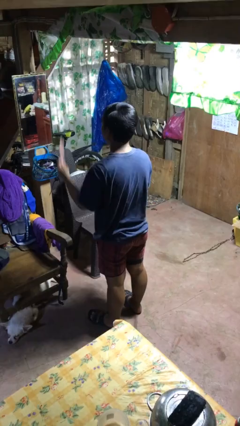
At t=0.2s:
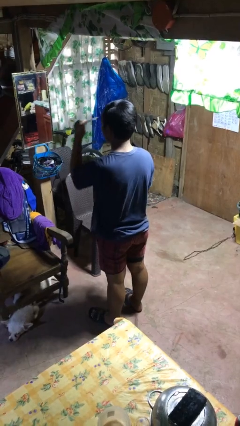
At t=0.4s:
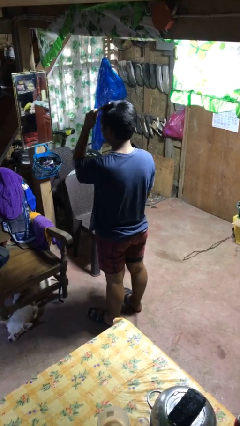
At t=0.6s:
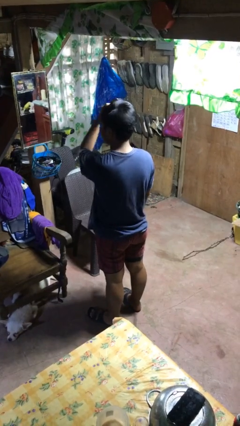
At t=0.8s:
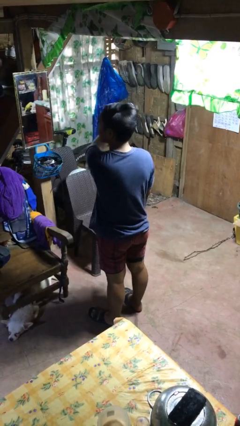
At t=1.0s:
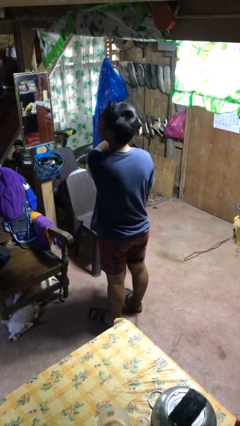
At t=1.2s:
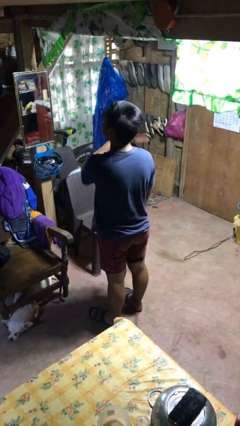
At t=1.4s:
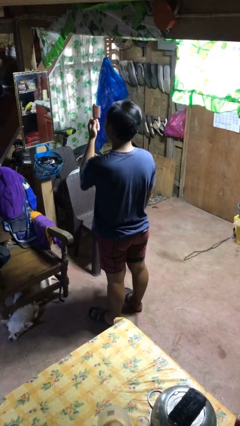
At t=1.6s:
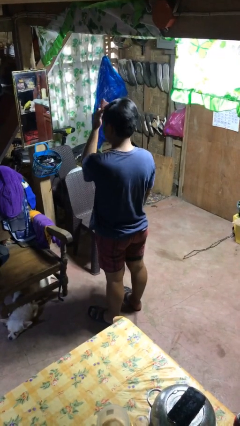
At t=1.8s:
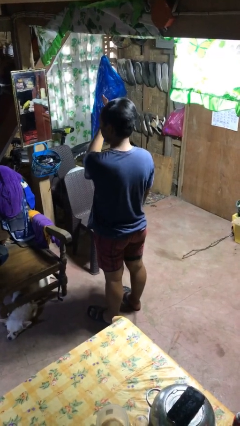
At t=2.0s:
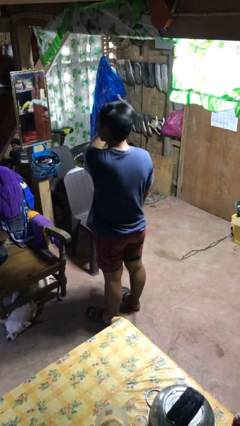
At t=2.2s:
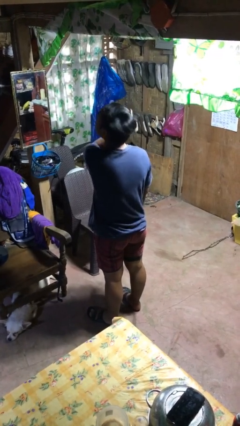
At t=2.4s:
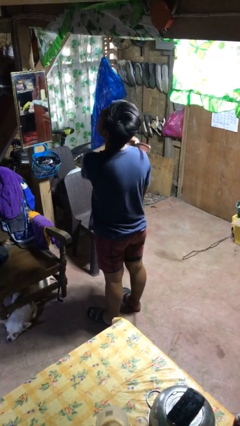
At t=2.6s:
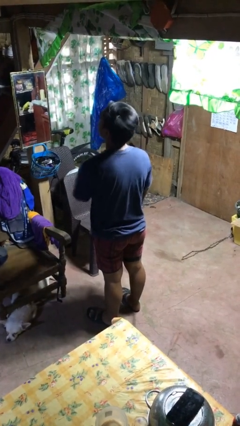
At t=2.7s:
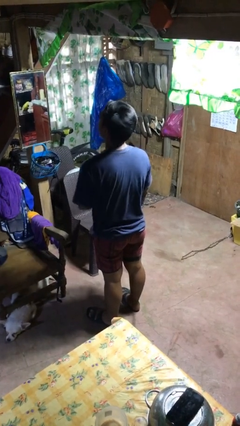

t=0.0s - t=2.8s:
person brushes hair

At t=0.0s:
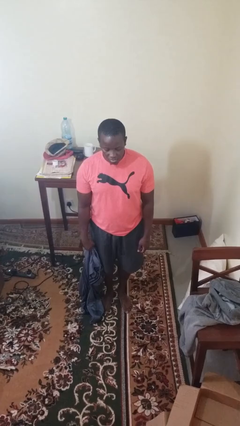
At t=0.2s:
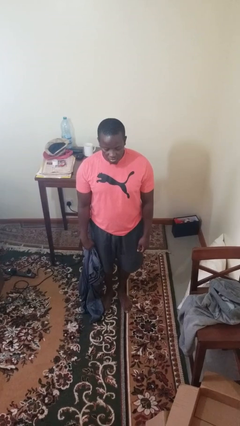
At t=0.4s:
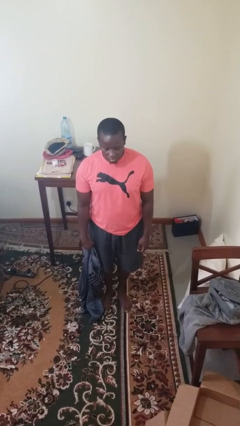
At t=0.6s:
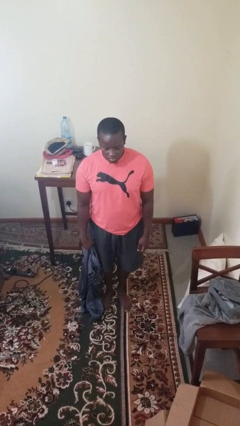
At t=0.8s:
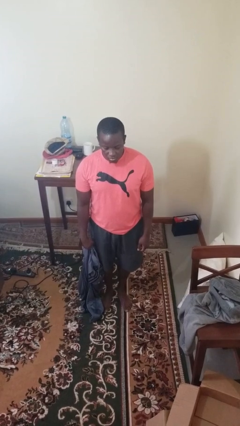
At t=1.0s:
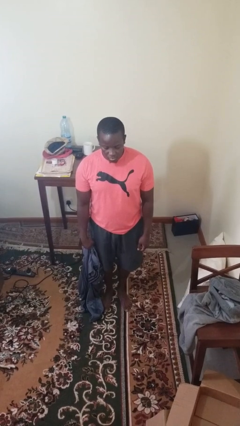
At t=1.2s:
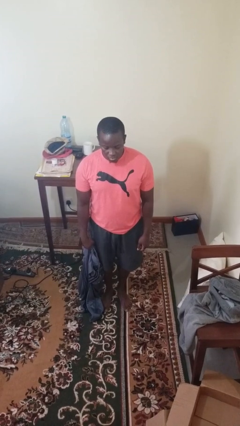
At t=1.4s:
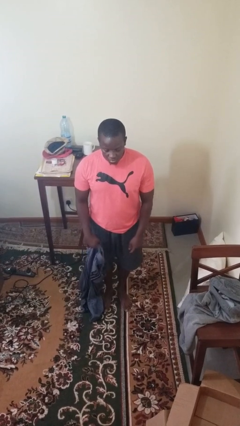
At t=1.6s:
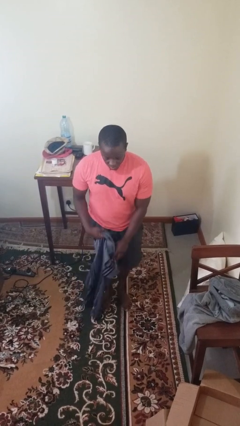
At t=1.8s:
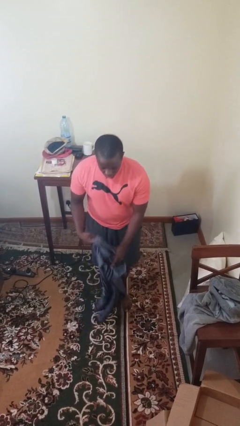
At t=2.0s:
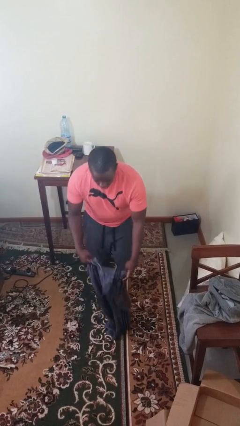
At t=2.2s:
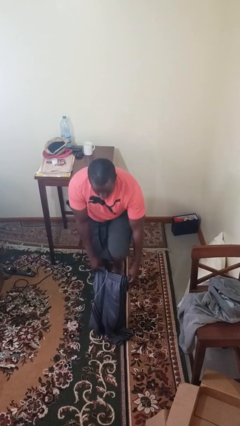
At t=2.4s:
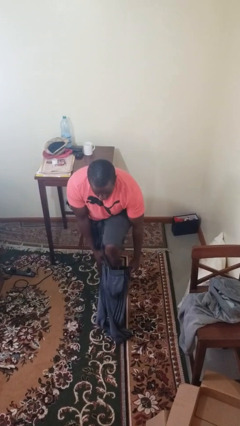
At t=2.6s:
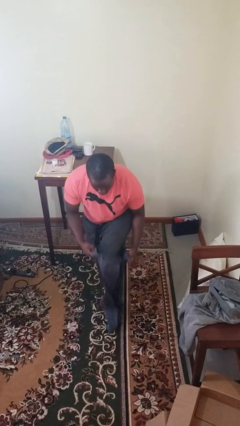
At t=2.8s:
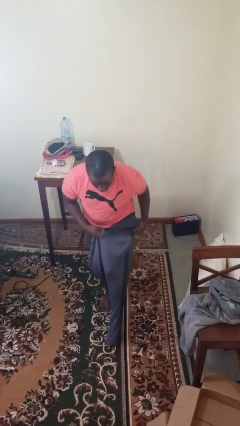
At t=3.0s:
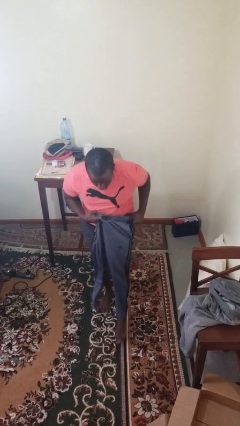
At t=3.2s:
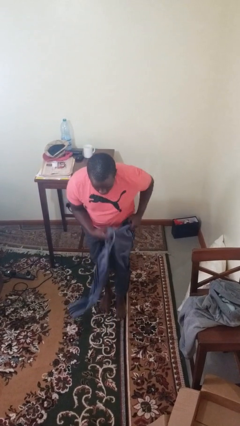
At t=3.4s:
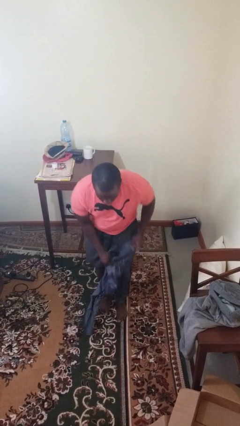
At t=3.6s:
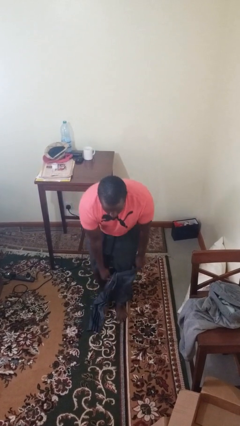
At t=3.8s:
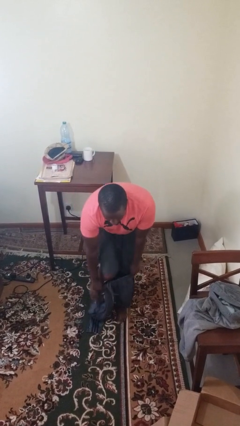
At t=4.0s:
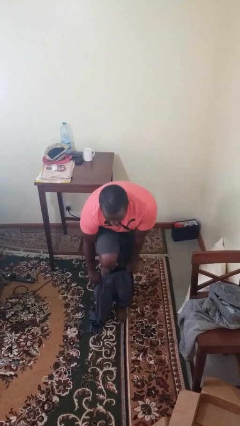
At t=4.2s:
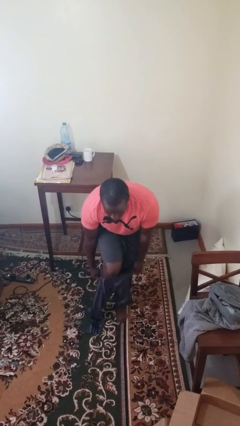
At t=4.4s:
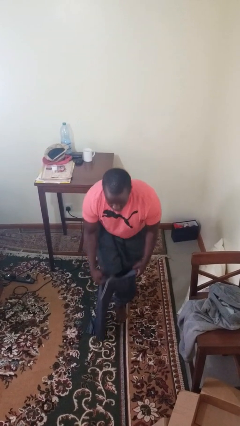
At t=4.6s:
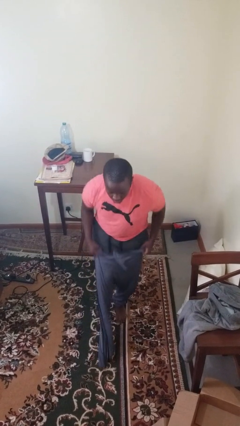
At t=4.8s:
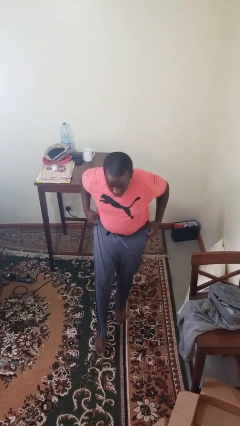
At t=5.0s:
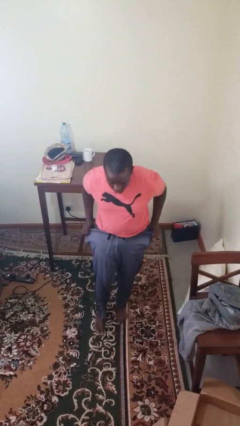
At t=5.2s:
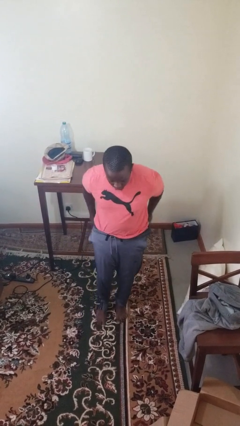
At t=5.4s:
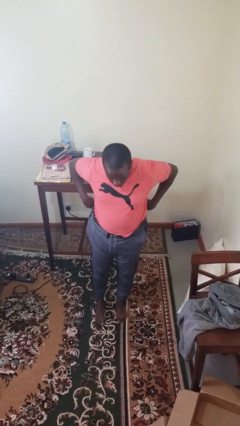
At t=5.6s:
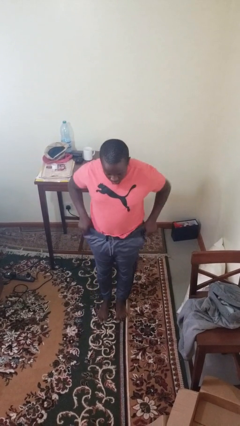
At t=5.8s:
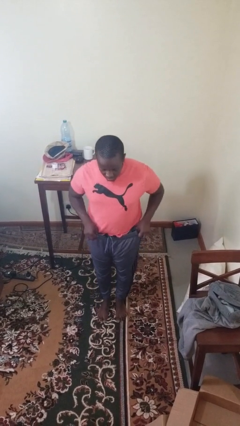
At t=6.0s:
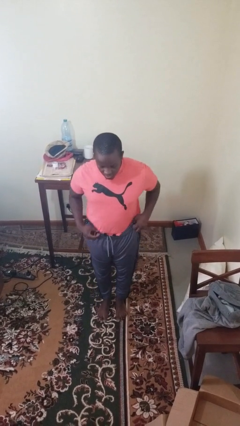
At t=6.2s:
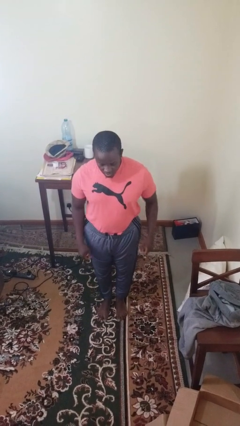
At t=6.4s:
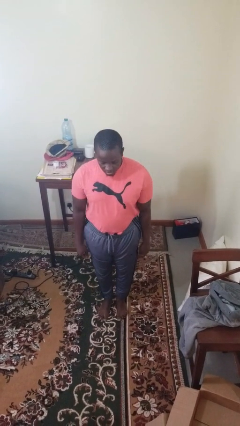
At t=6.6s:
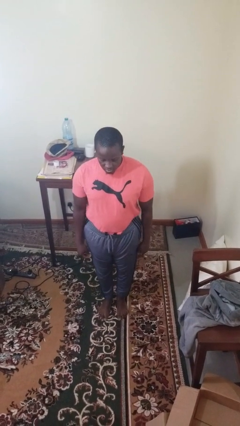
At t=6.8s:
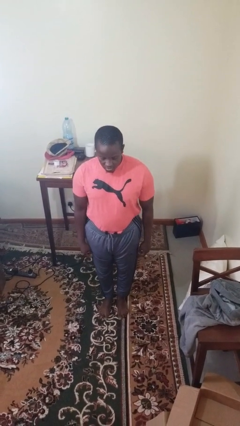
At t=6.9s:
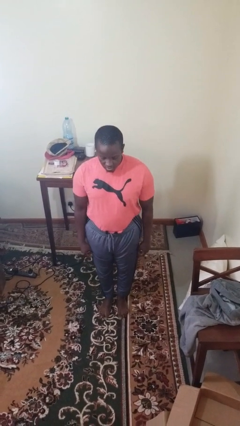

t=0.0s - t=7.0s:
person puts on pants

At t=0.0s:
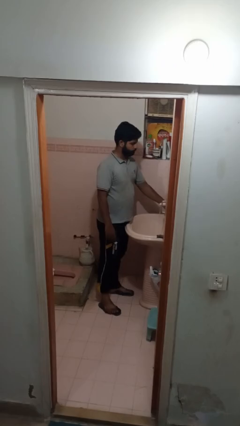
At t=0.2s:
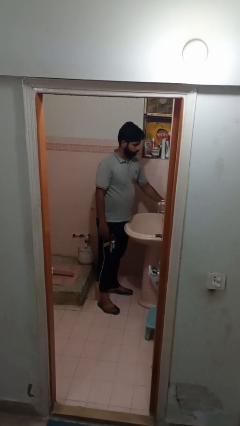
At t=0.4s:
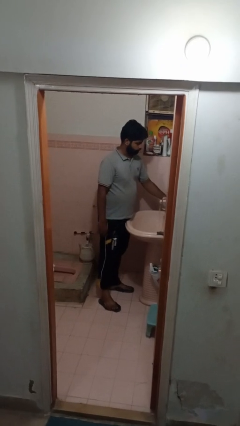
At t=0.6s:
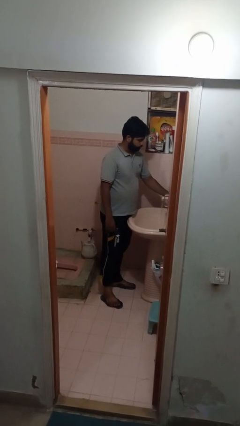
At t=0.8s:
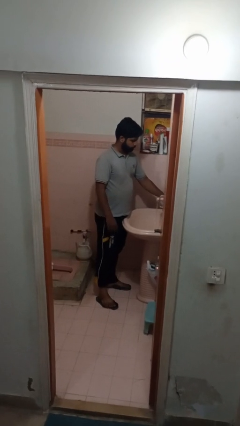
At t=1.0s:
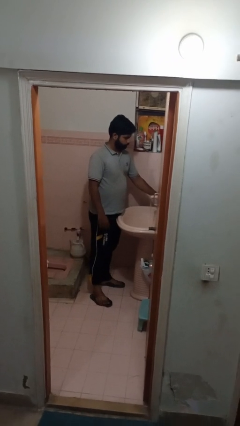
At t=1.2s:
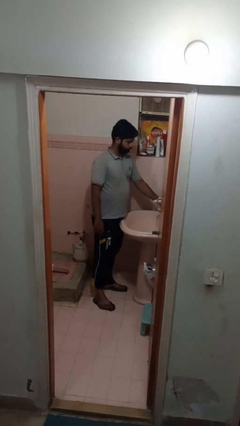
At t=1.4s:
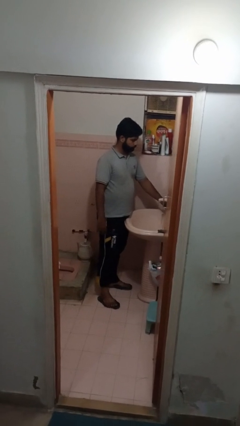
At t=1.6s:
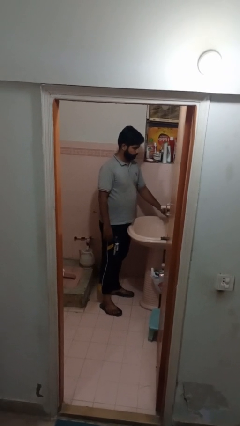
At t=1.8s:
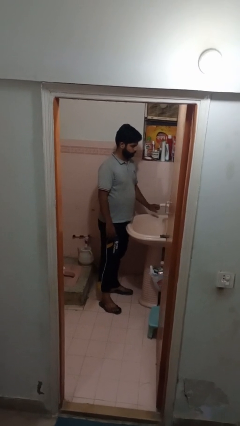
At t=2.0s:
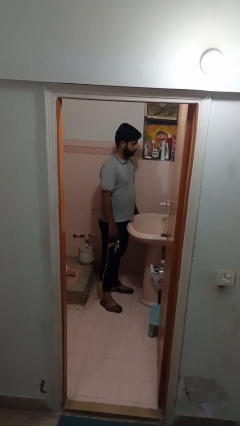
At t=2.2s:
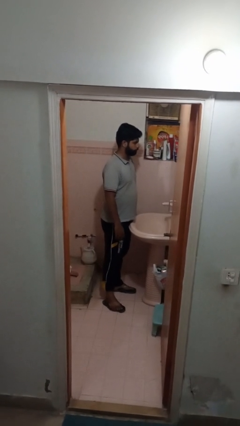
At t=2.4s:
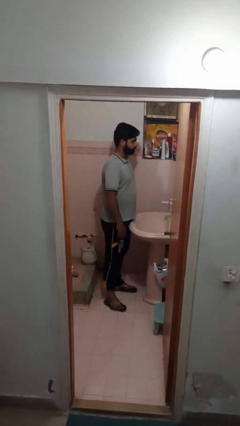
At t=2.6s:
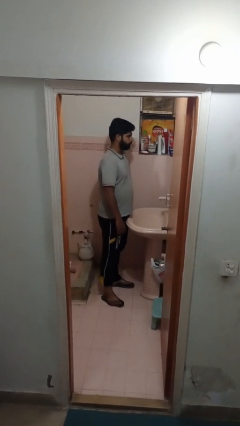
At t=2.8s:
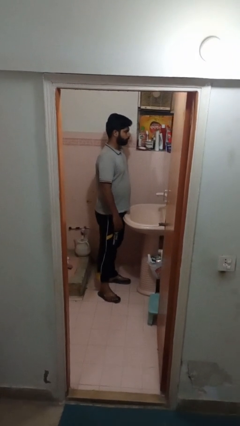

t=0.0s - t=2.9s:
person turns off faucet

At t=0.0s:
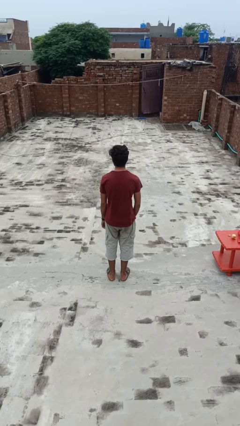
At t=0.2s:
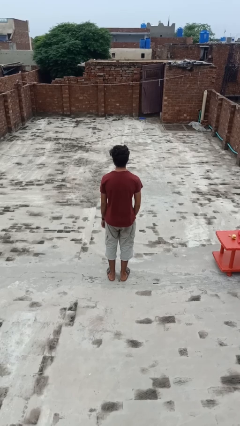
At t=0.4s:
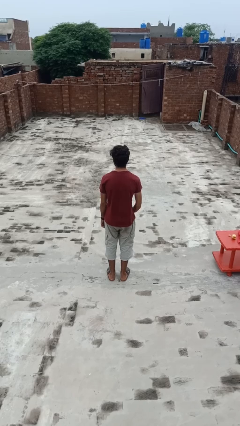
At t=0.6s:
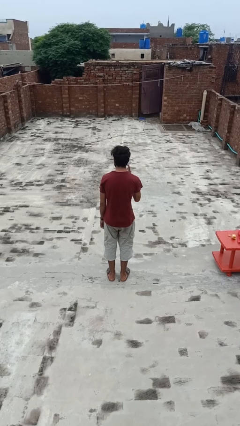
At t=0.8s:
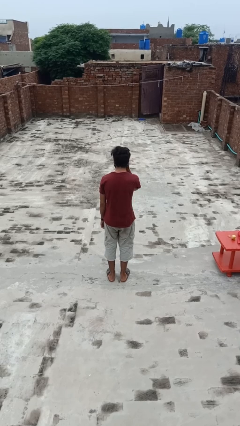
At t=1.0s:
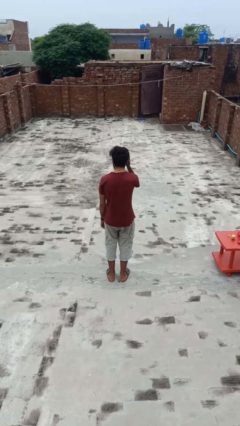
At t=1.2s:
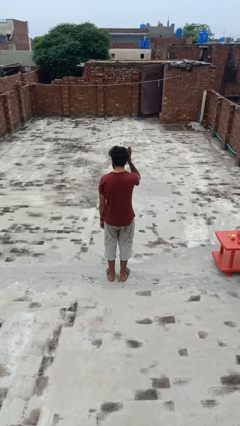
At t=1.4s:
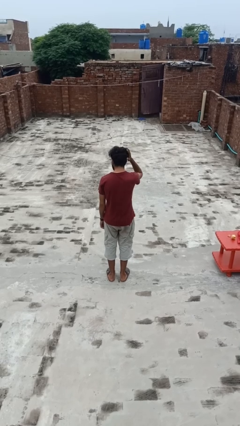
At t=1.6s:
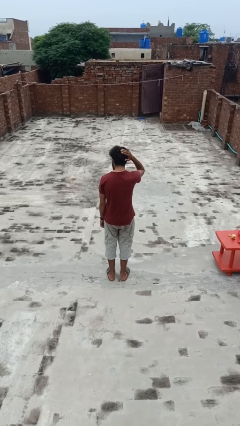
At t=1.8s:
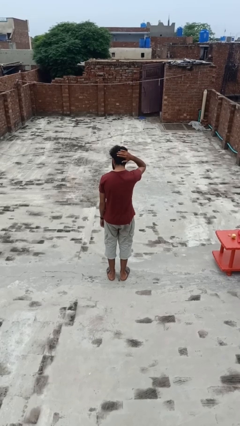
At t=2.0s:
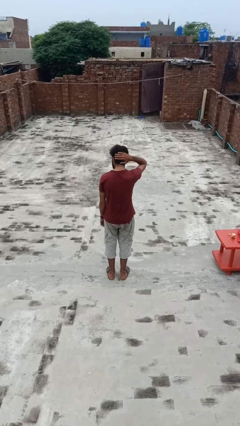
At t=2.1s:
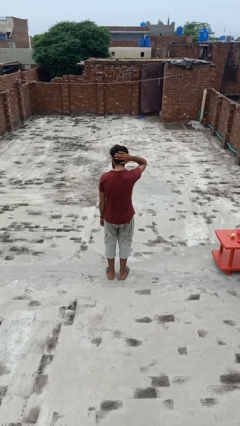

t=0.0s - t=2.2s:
person pats head

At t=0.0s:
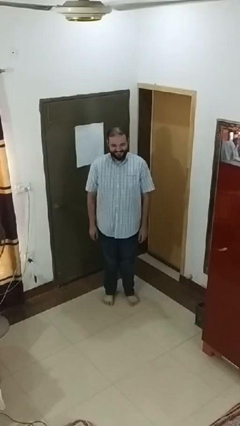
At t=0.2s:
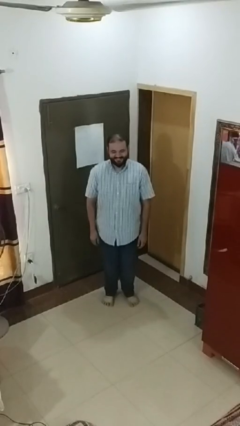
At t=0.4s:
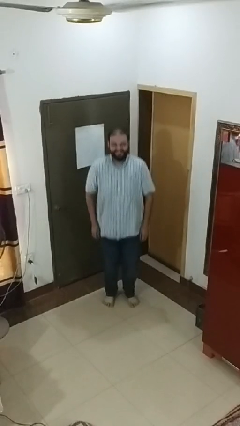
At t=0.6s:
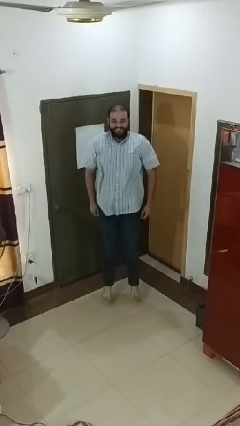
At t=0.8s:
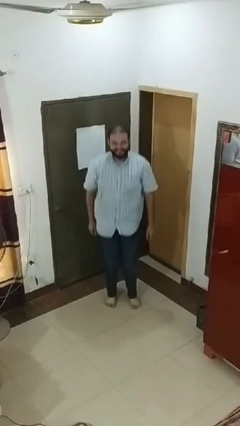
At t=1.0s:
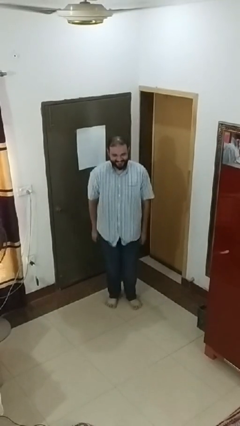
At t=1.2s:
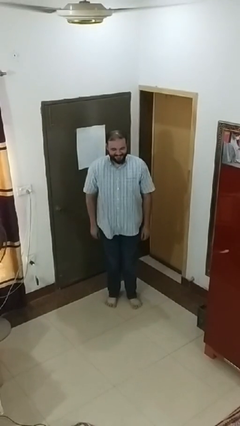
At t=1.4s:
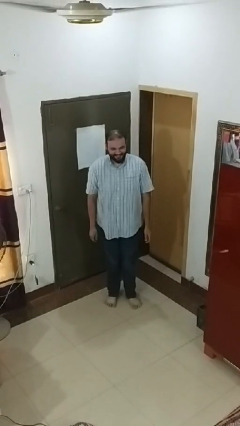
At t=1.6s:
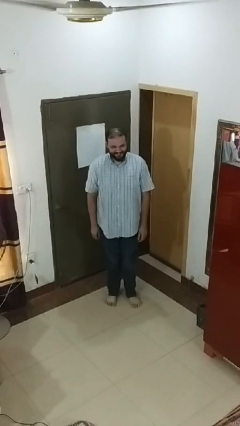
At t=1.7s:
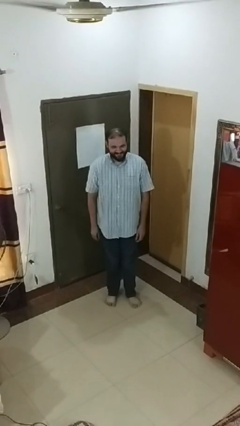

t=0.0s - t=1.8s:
person jumps

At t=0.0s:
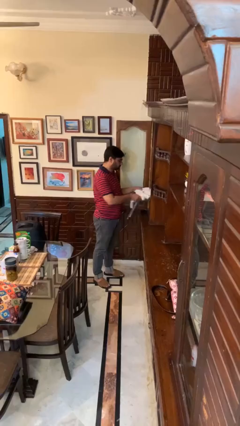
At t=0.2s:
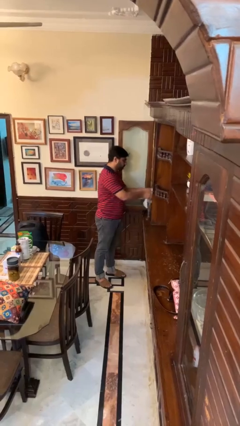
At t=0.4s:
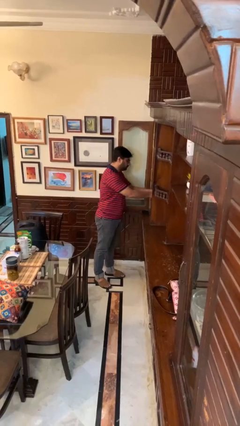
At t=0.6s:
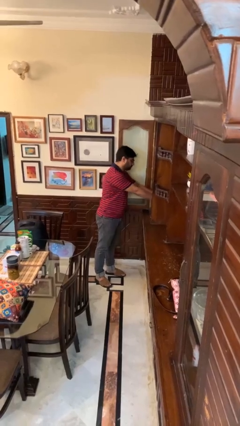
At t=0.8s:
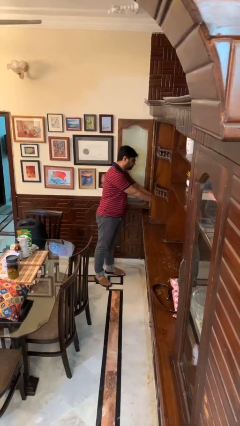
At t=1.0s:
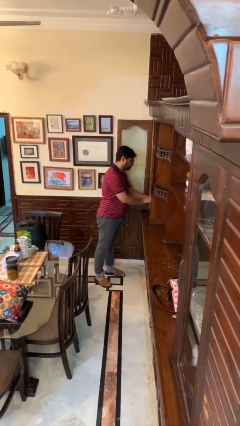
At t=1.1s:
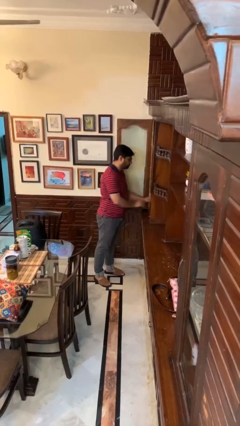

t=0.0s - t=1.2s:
person puts clothes into dresser
